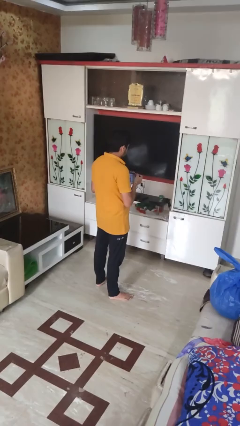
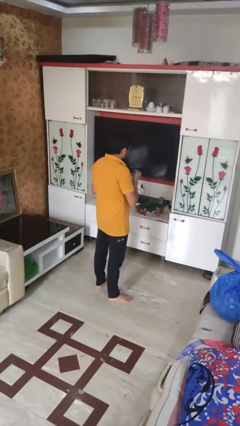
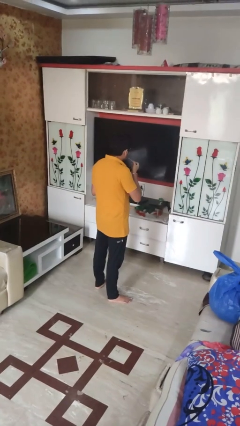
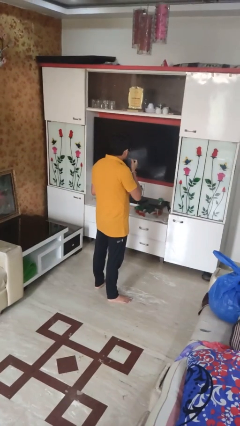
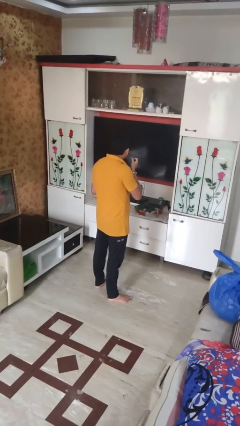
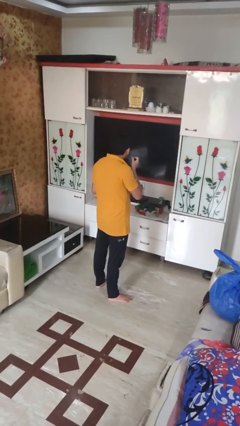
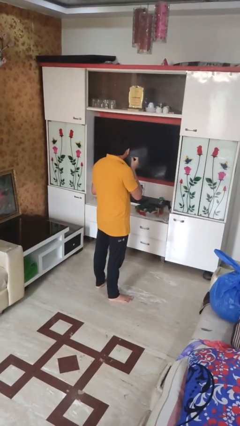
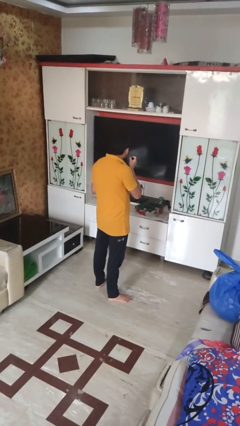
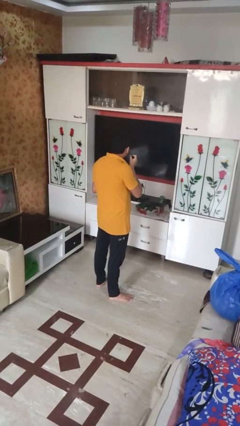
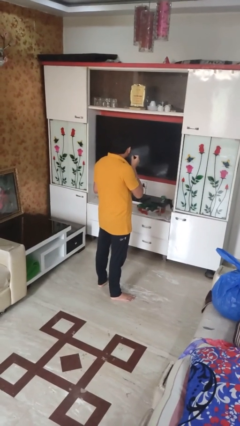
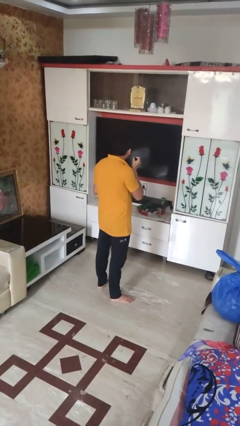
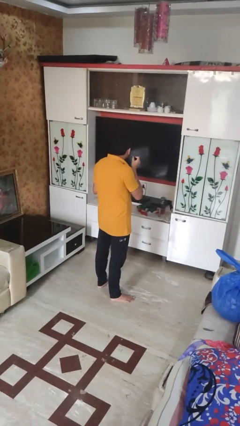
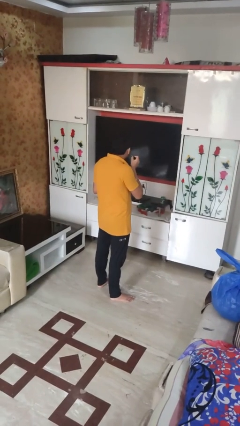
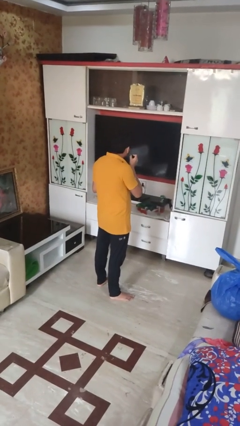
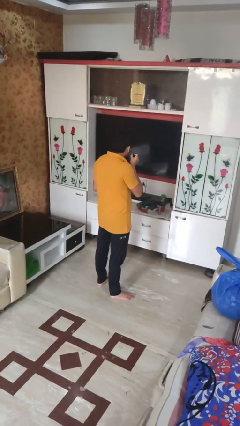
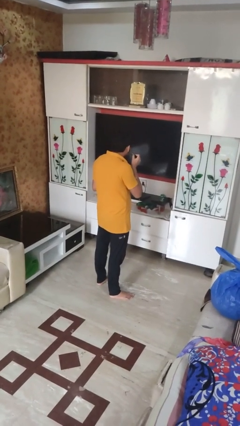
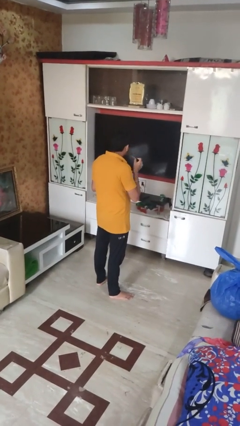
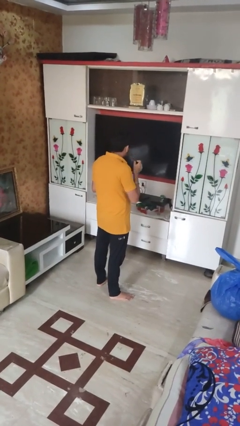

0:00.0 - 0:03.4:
person applies lip makeup

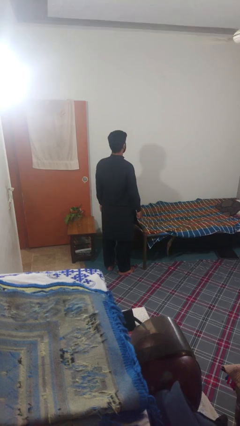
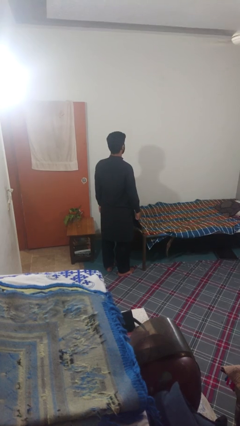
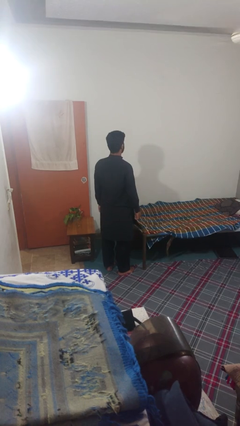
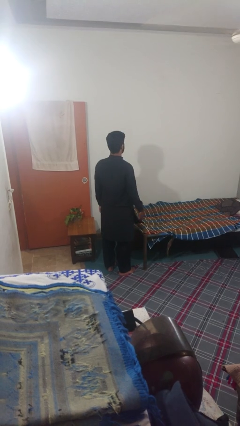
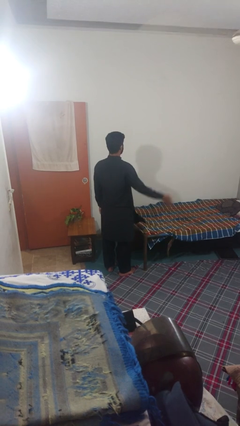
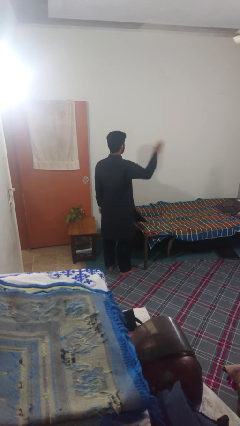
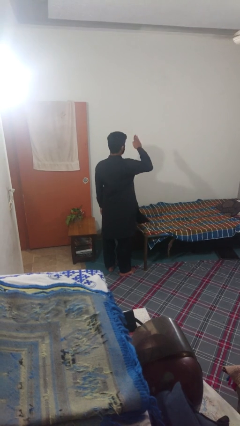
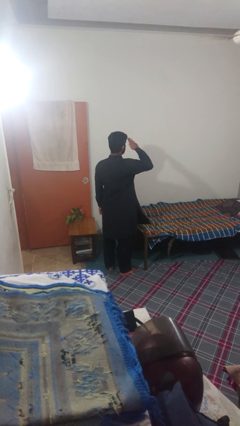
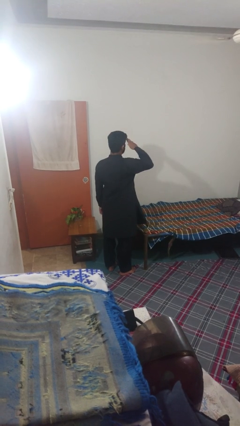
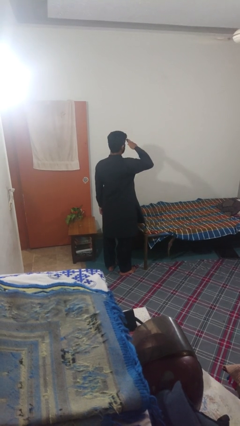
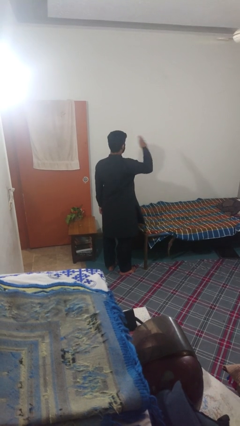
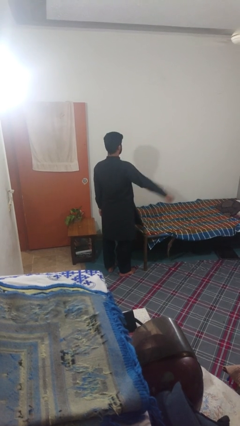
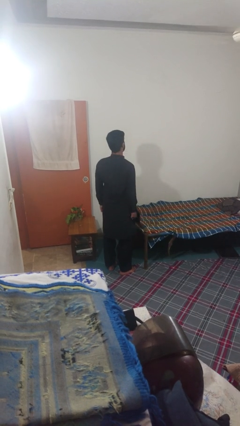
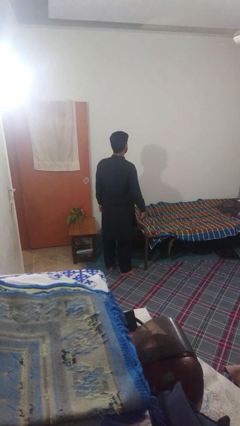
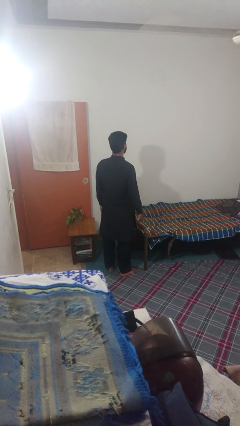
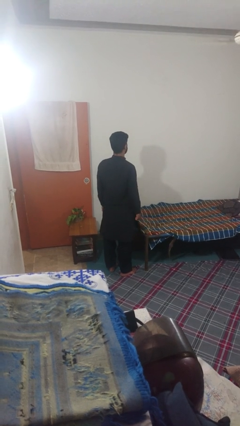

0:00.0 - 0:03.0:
person salutes

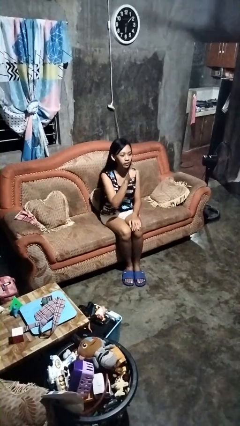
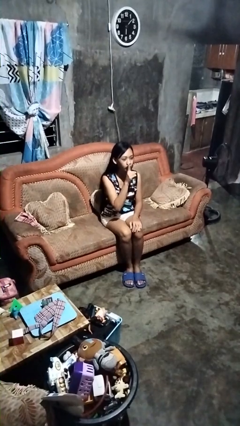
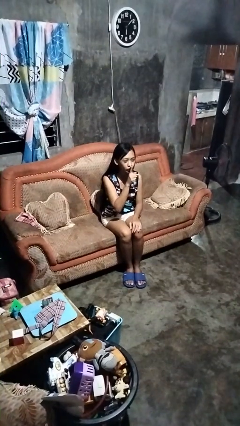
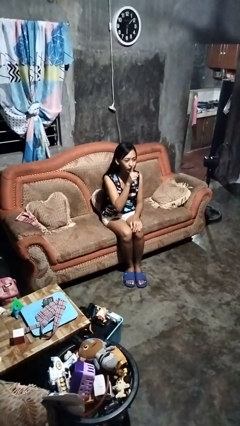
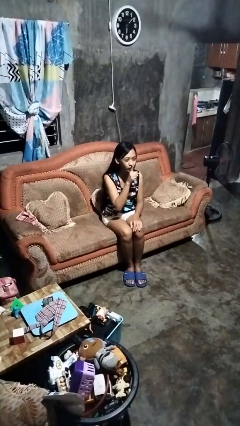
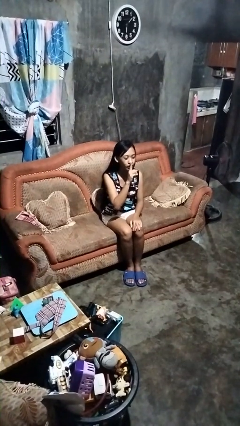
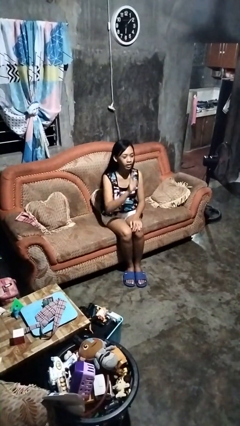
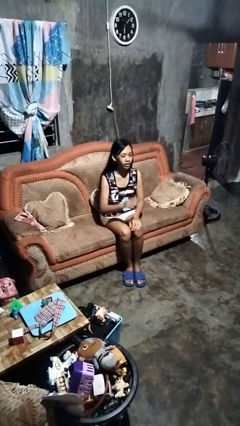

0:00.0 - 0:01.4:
person gestures be quiet

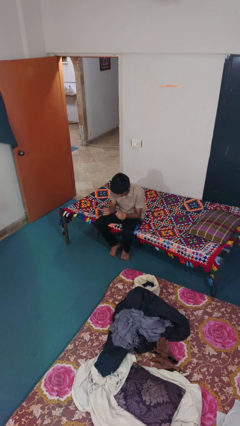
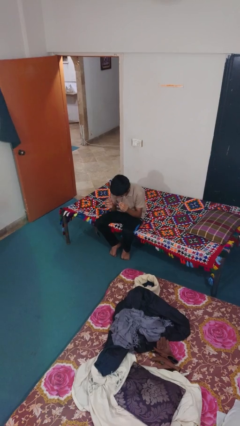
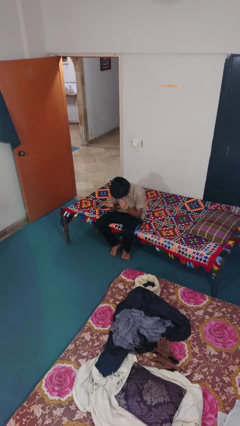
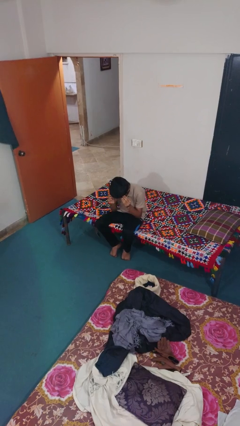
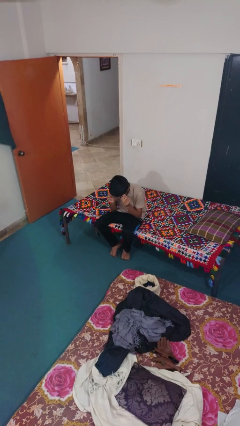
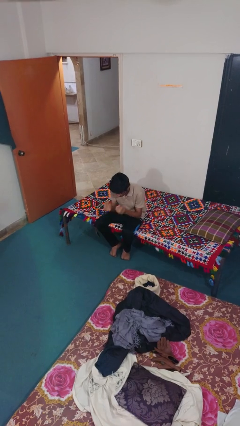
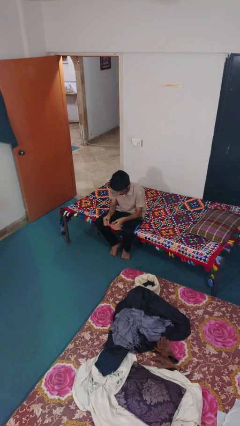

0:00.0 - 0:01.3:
person puts on glasses

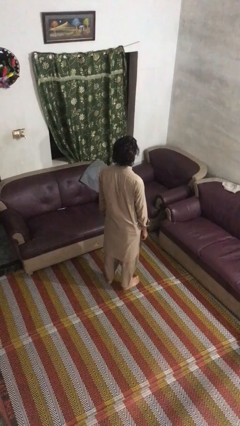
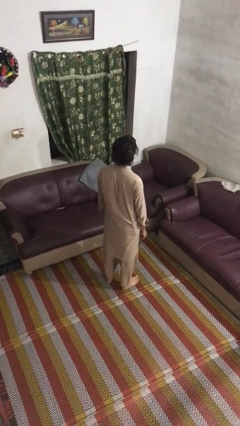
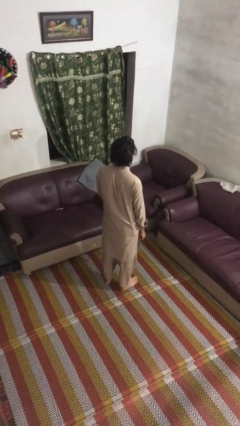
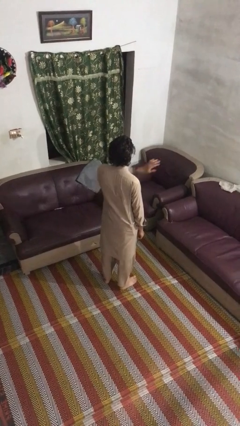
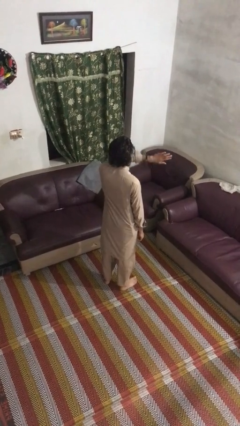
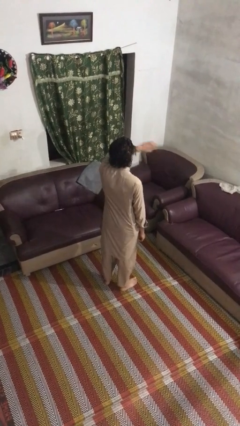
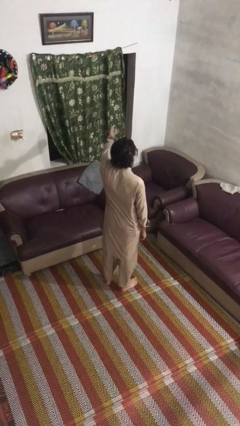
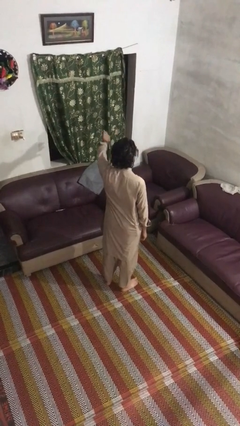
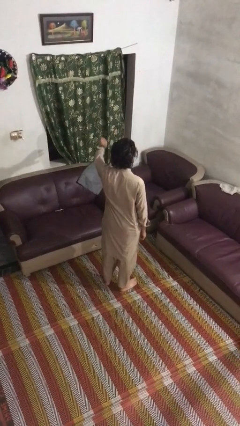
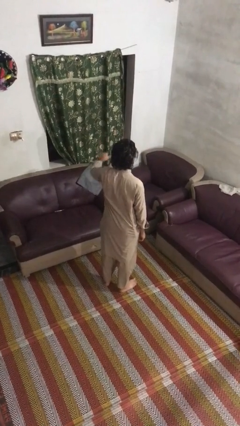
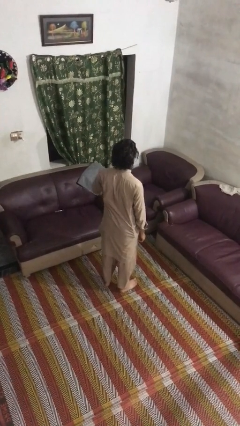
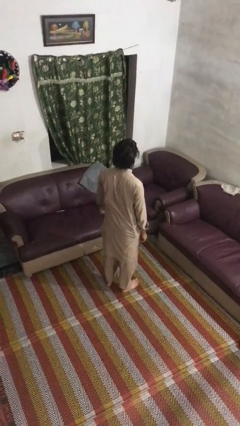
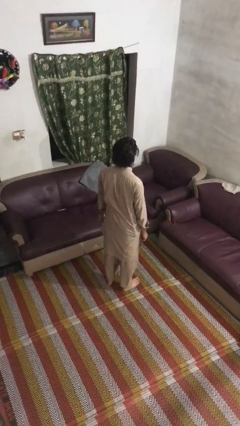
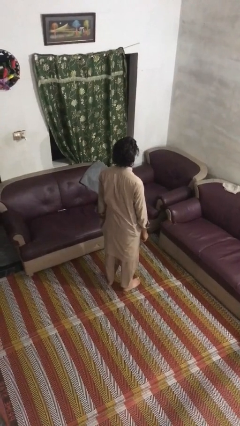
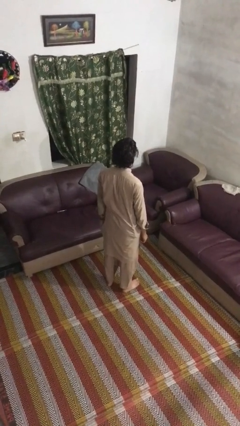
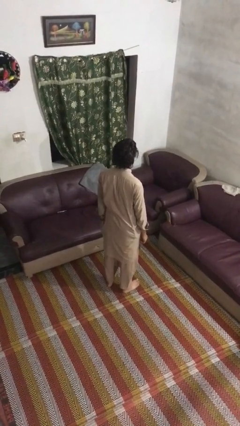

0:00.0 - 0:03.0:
person gestures swipe left

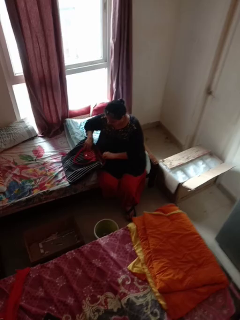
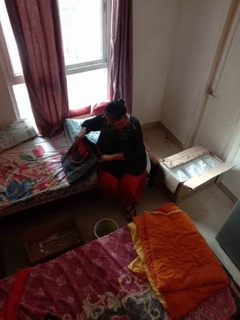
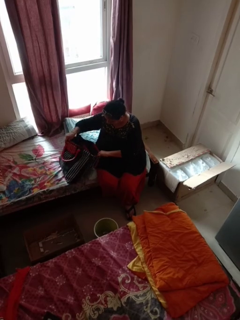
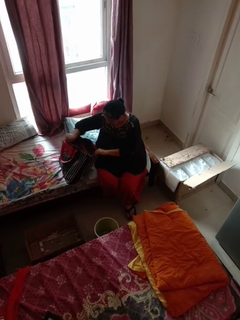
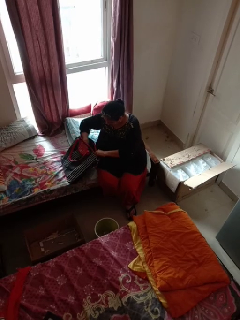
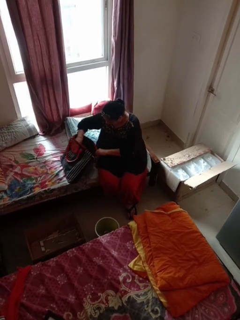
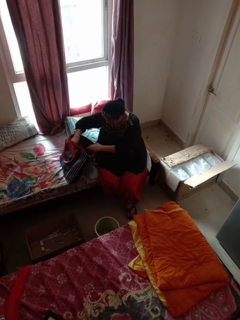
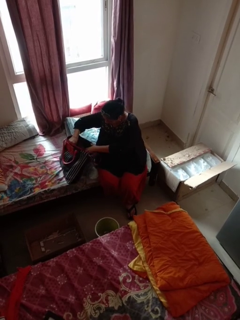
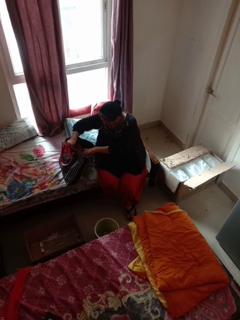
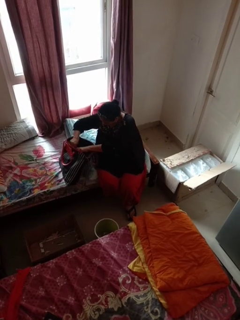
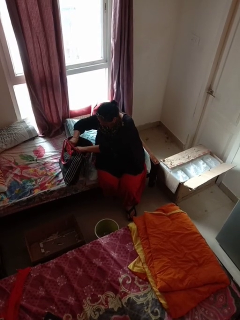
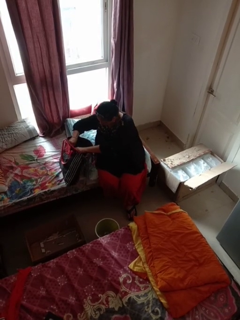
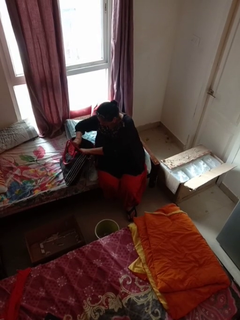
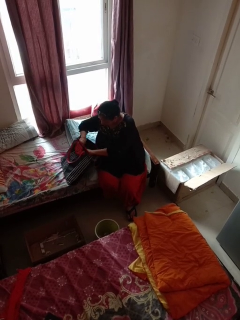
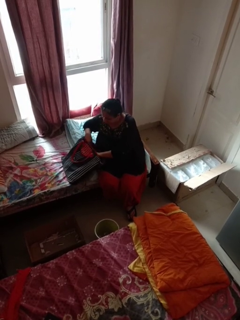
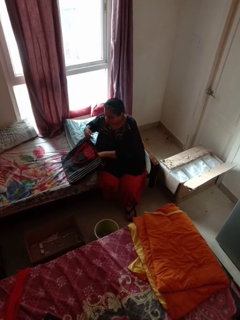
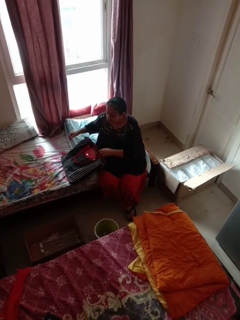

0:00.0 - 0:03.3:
person searches in bag

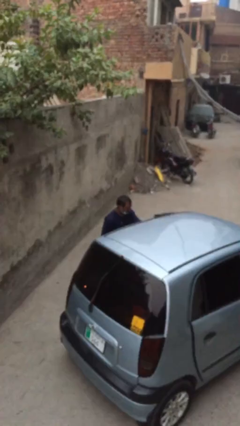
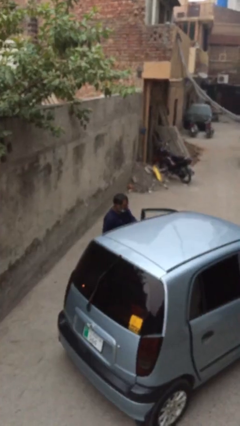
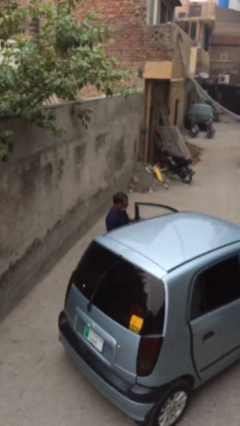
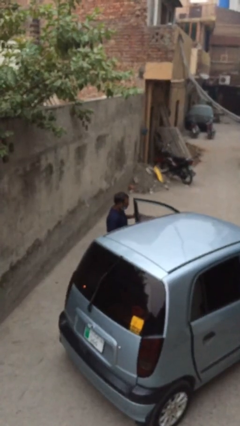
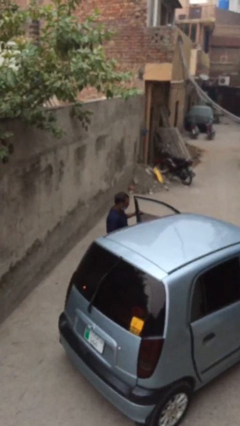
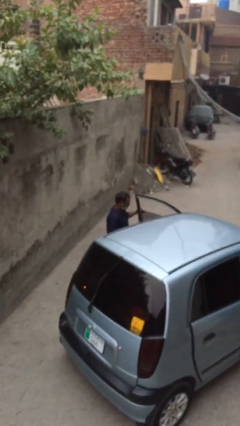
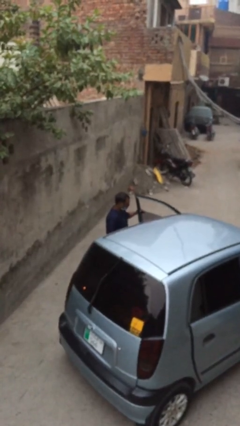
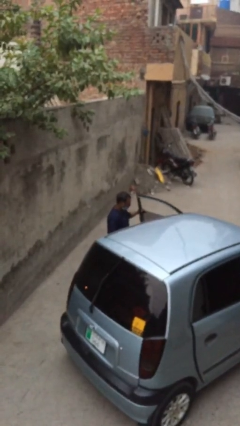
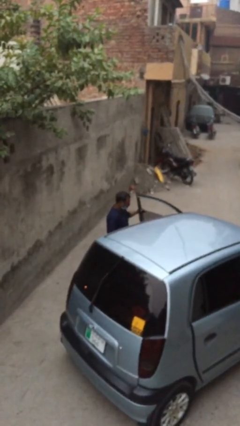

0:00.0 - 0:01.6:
person opens car door

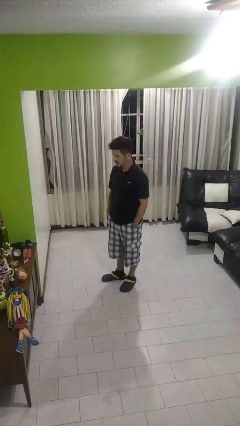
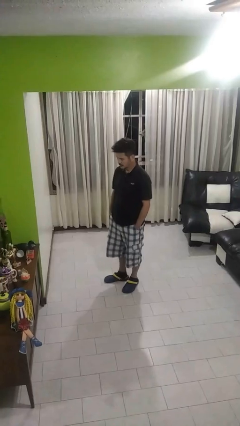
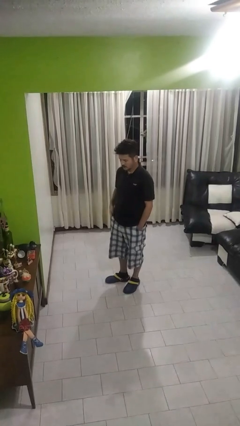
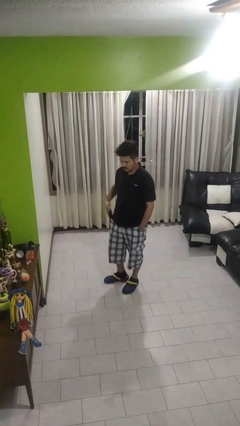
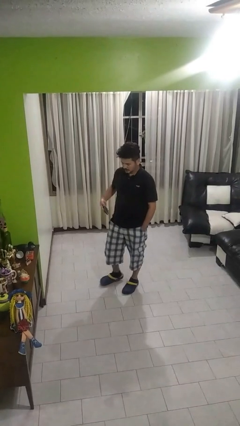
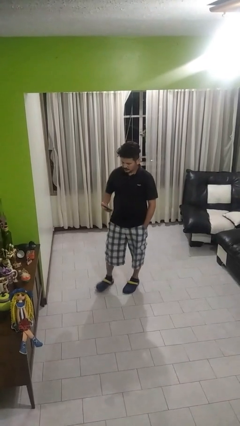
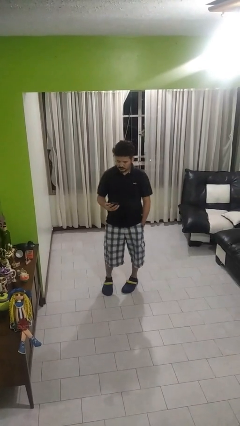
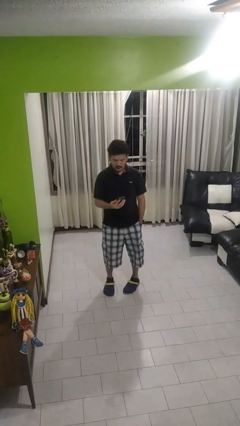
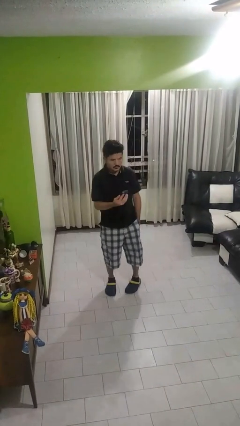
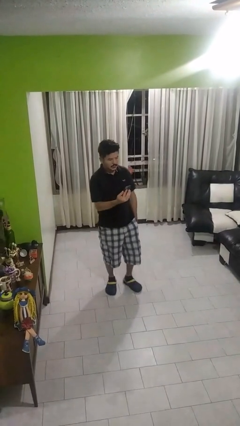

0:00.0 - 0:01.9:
person takes phone from pocket
